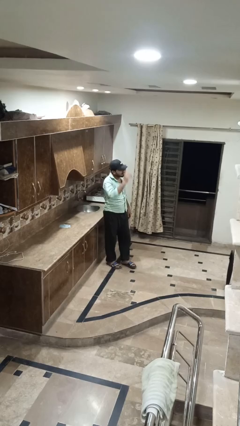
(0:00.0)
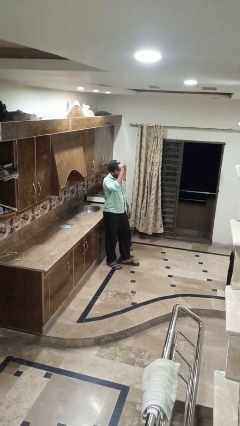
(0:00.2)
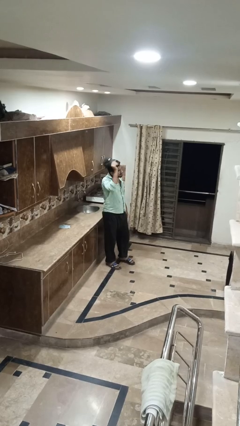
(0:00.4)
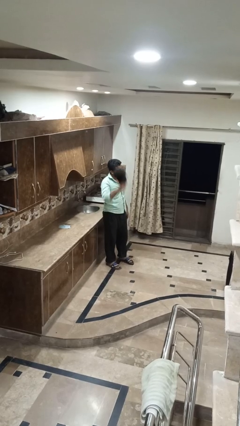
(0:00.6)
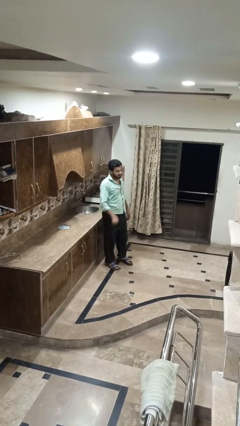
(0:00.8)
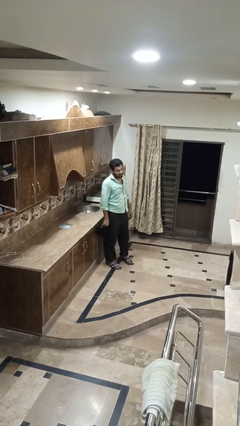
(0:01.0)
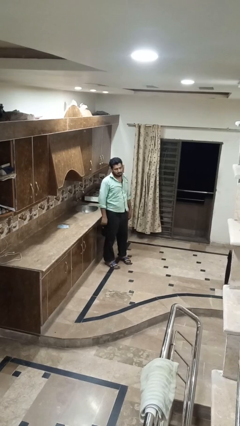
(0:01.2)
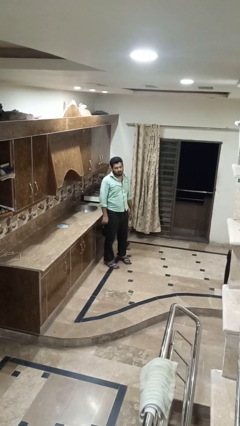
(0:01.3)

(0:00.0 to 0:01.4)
person takes off hat

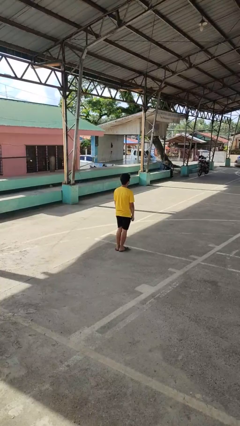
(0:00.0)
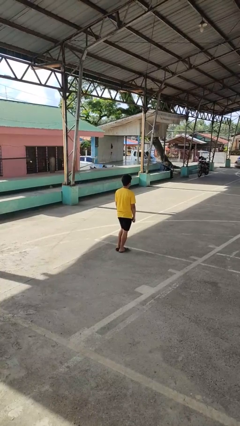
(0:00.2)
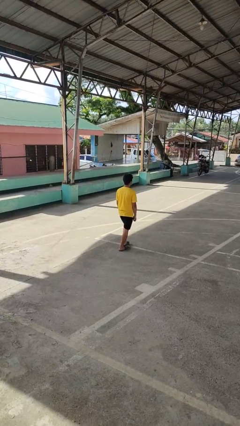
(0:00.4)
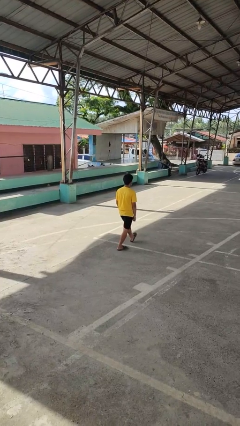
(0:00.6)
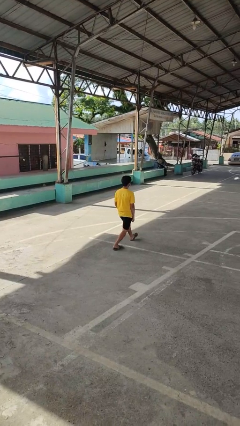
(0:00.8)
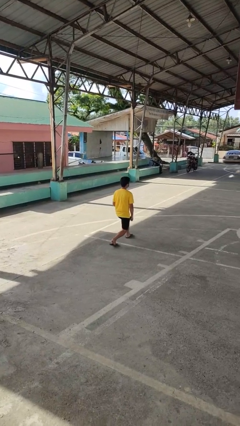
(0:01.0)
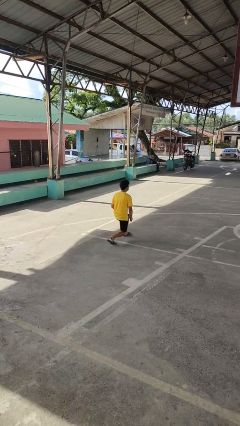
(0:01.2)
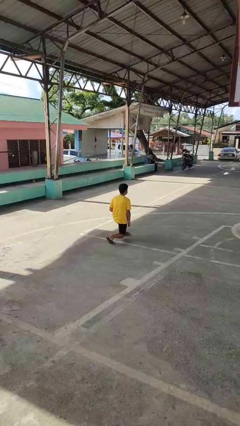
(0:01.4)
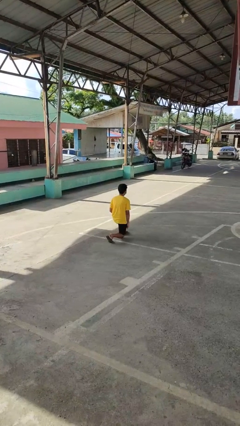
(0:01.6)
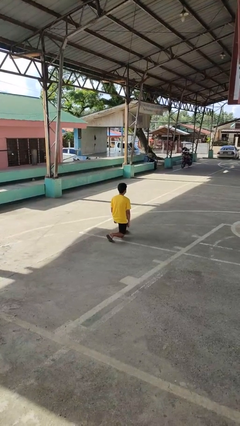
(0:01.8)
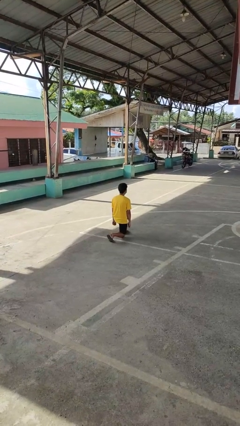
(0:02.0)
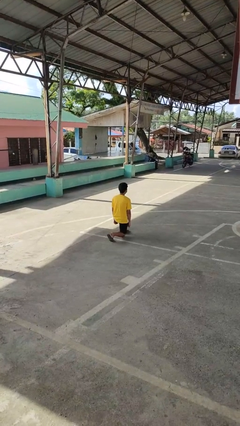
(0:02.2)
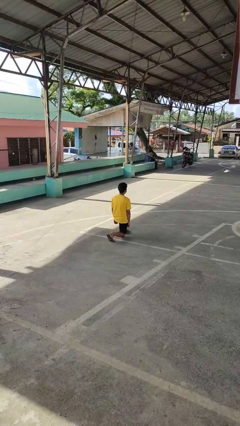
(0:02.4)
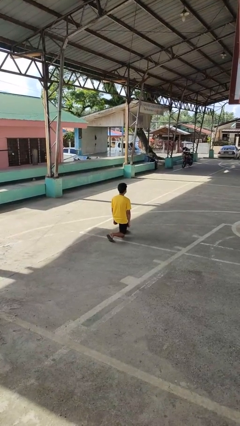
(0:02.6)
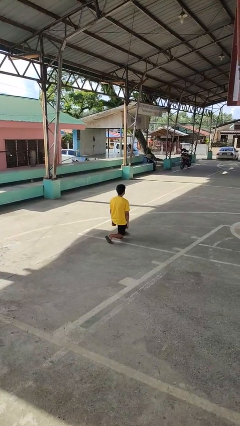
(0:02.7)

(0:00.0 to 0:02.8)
person kneels

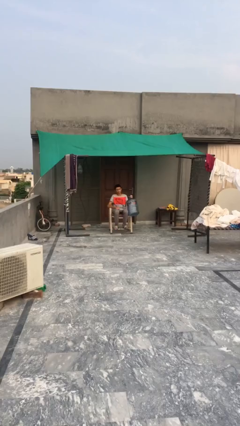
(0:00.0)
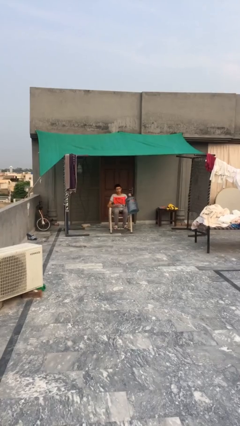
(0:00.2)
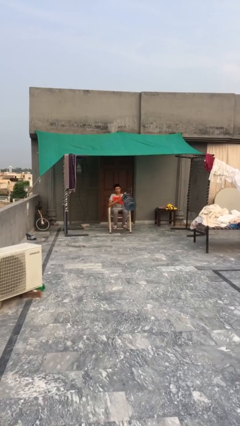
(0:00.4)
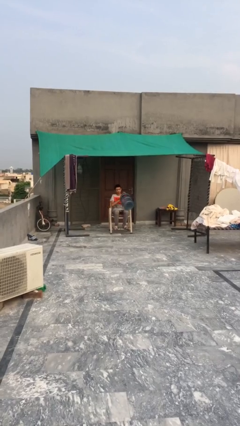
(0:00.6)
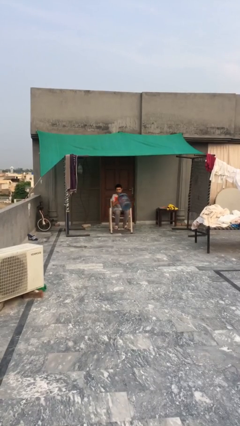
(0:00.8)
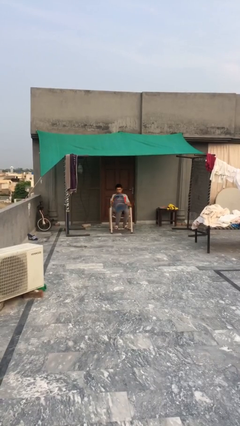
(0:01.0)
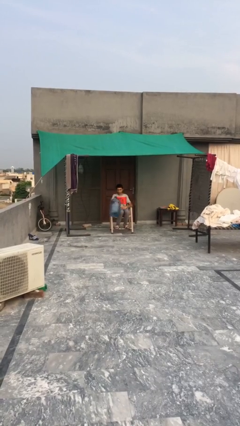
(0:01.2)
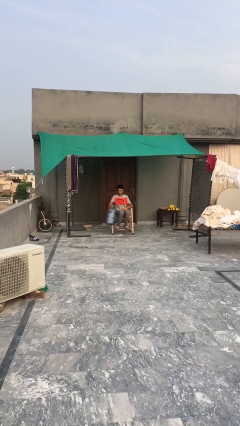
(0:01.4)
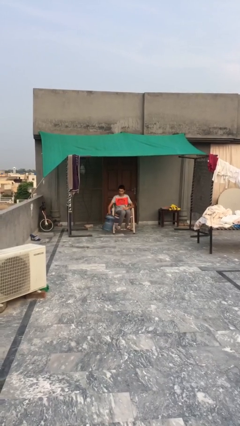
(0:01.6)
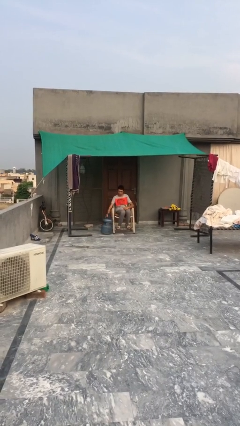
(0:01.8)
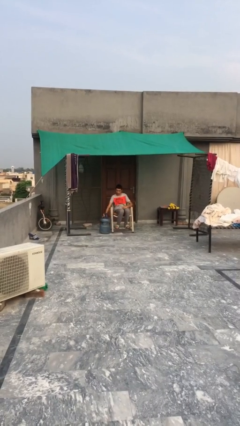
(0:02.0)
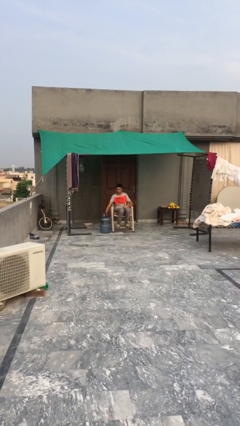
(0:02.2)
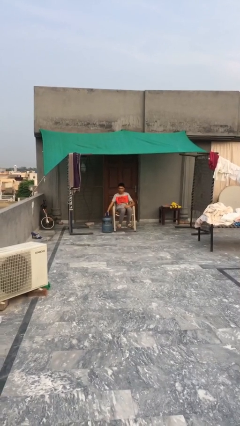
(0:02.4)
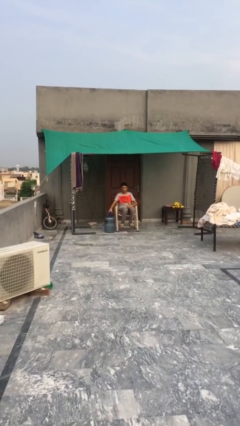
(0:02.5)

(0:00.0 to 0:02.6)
person puts down object on floor

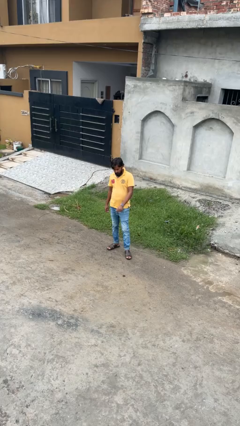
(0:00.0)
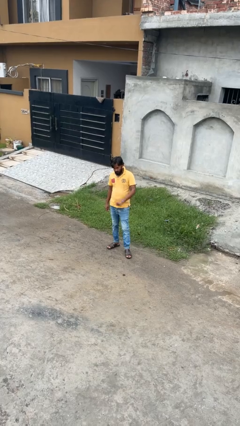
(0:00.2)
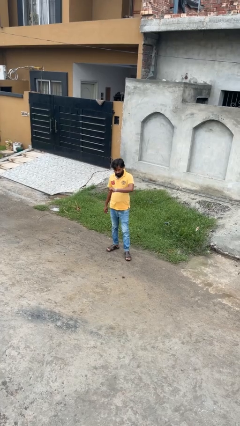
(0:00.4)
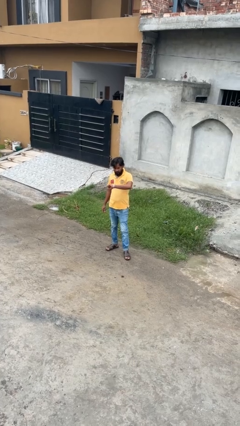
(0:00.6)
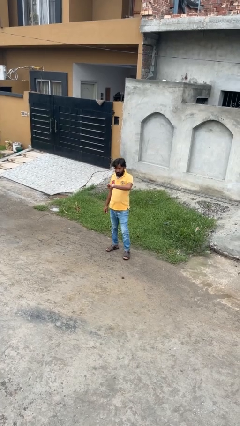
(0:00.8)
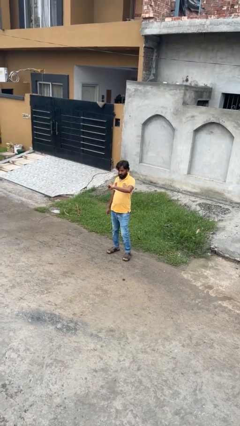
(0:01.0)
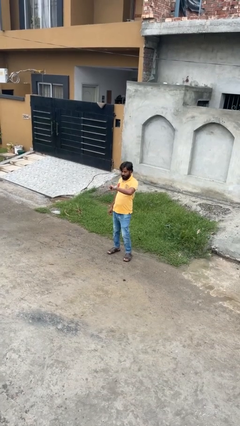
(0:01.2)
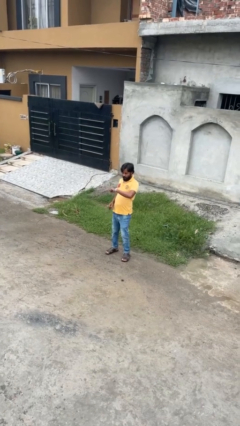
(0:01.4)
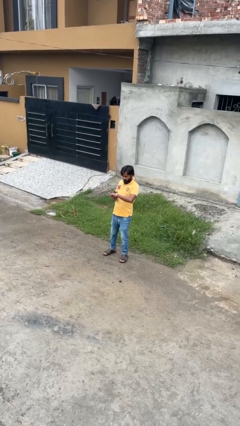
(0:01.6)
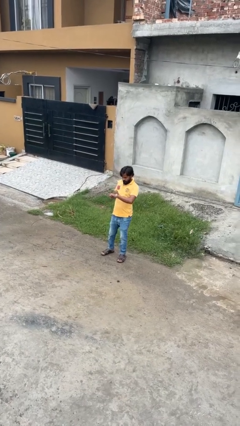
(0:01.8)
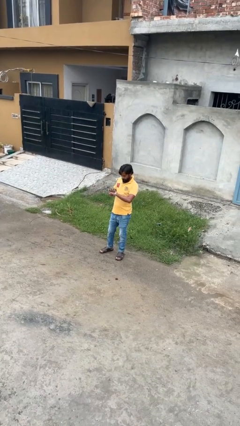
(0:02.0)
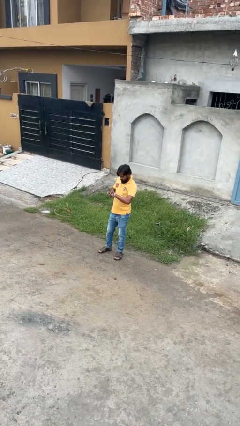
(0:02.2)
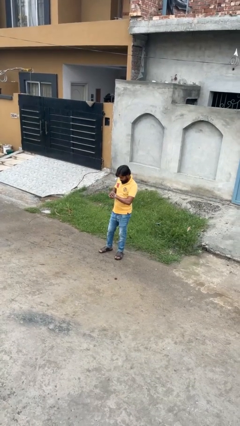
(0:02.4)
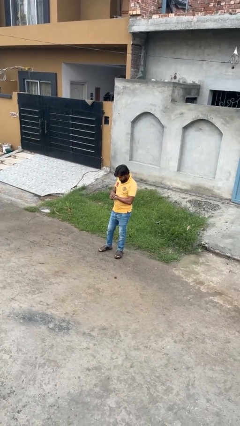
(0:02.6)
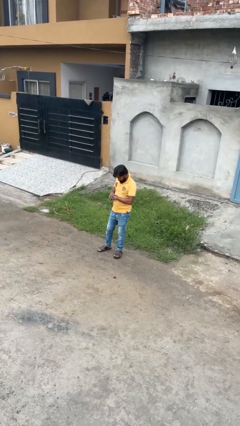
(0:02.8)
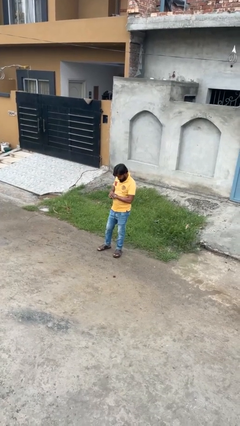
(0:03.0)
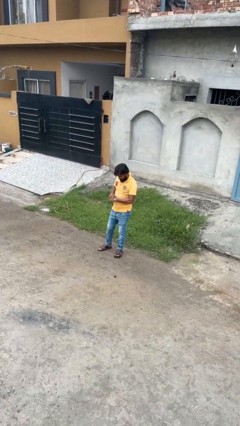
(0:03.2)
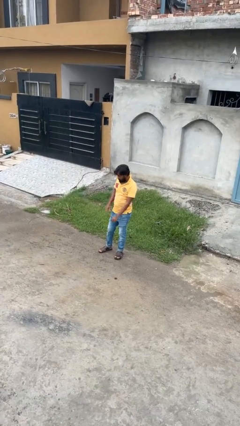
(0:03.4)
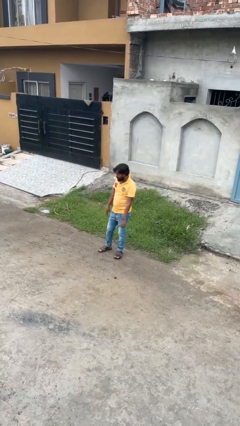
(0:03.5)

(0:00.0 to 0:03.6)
person looks at wristwatch

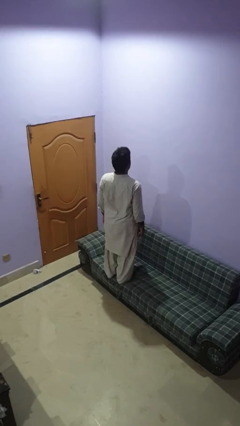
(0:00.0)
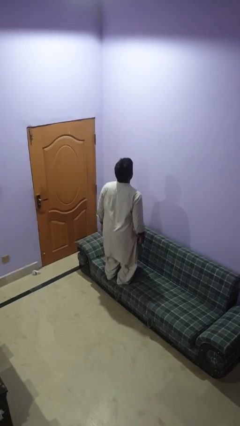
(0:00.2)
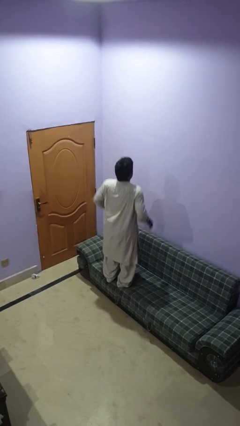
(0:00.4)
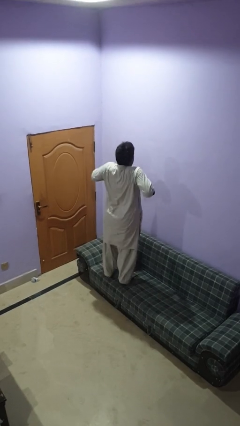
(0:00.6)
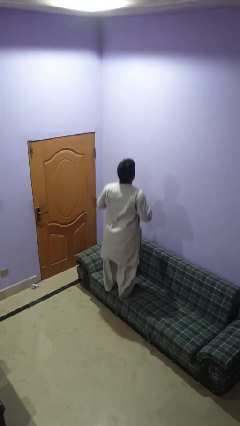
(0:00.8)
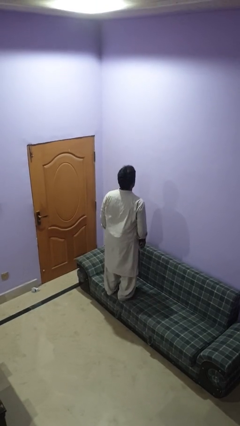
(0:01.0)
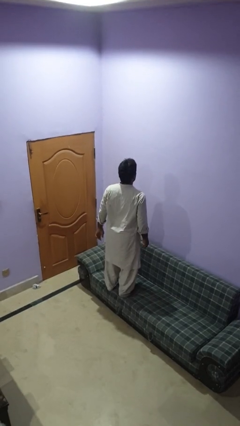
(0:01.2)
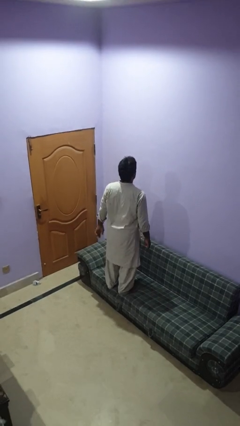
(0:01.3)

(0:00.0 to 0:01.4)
person jumps on couch

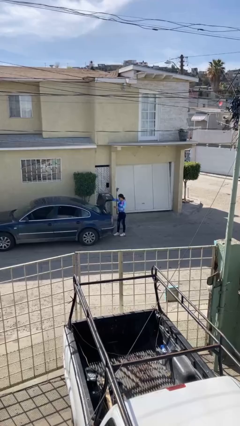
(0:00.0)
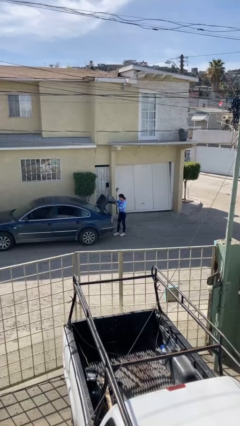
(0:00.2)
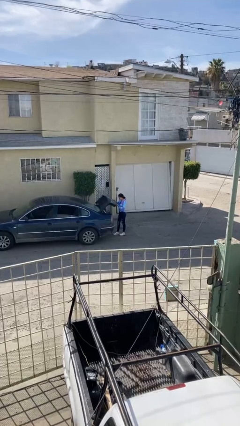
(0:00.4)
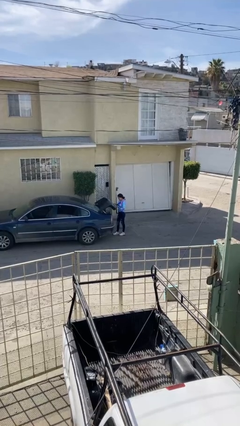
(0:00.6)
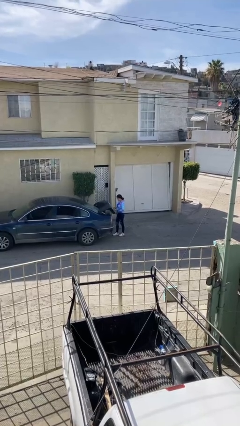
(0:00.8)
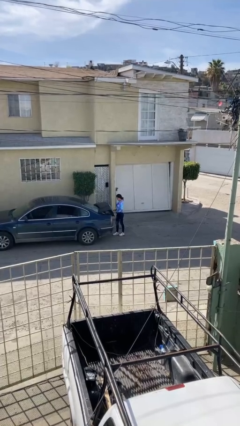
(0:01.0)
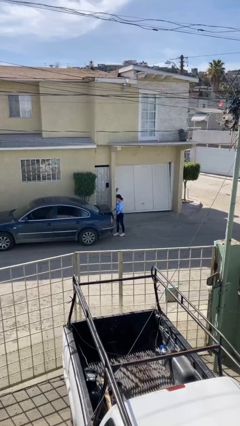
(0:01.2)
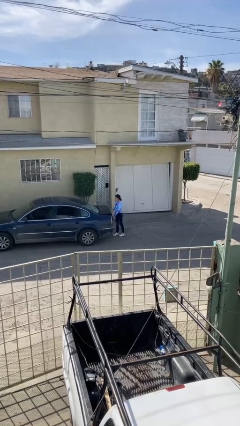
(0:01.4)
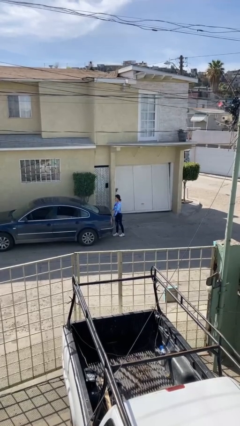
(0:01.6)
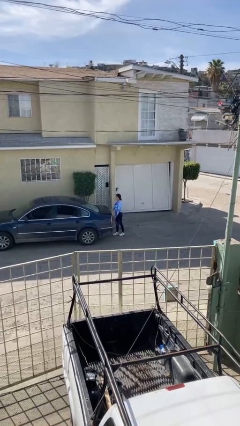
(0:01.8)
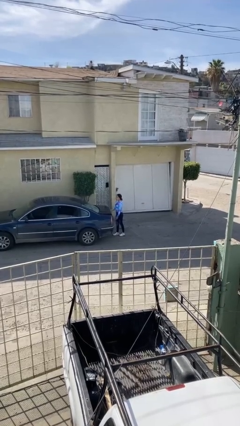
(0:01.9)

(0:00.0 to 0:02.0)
person closes car trunk

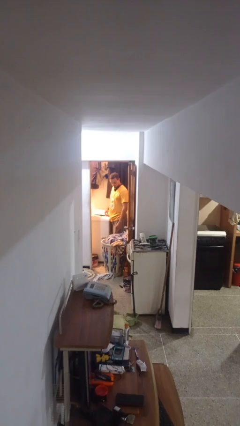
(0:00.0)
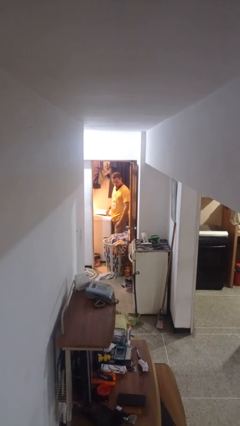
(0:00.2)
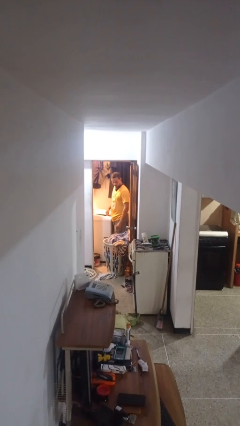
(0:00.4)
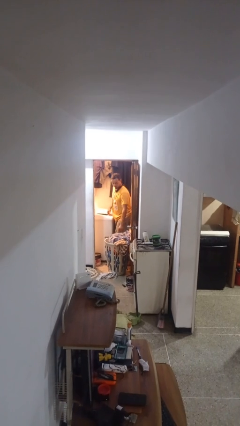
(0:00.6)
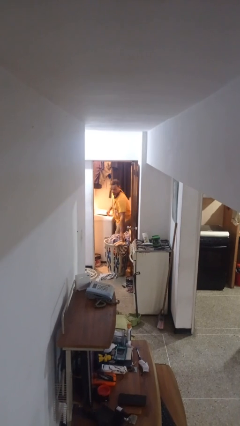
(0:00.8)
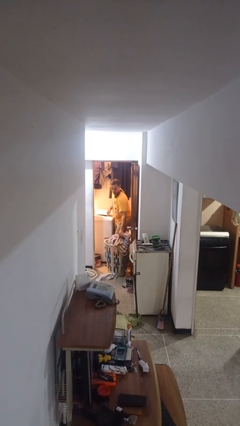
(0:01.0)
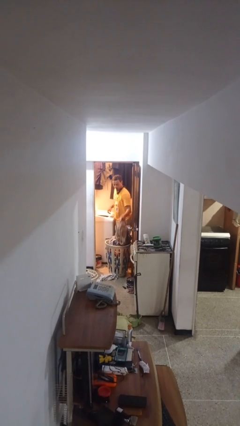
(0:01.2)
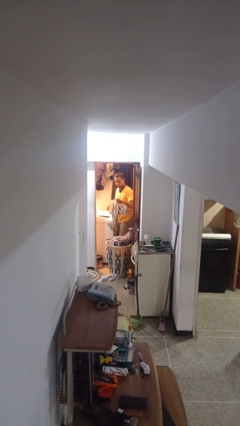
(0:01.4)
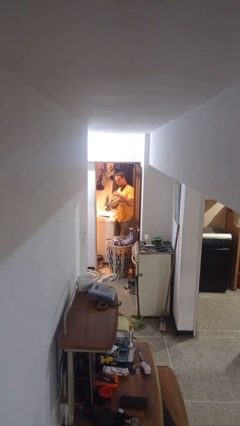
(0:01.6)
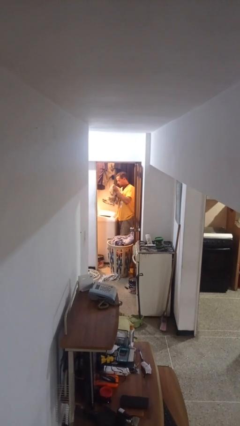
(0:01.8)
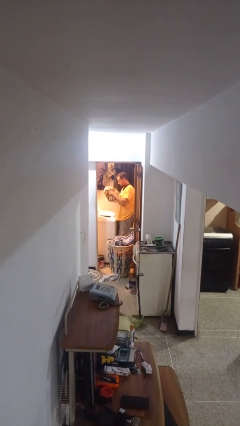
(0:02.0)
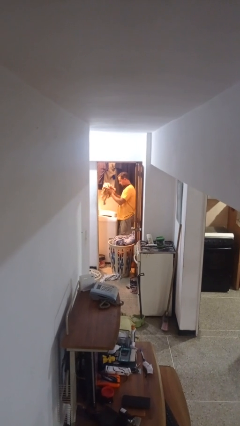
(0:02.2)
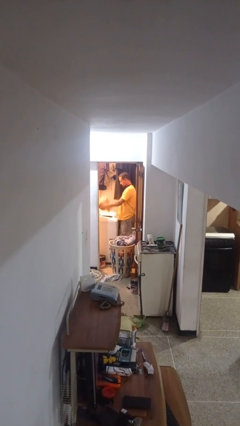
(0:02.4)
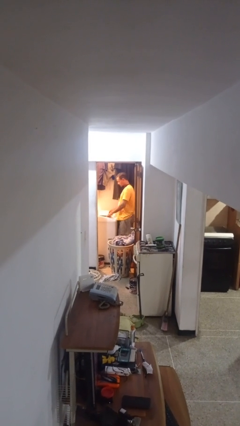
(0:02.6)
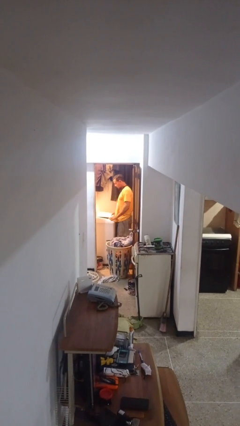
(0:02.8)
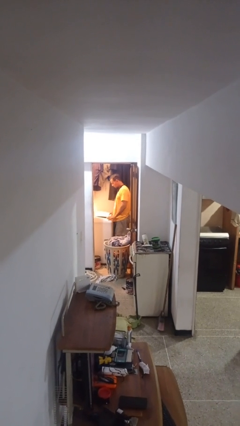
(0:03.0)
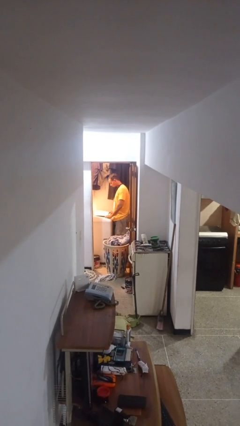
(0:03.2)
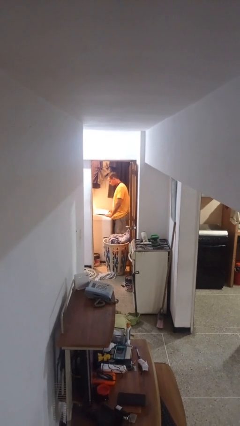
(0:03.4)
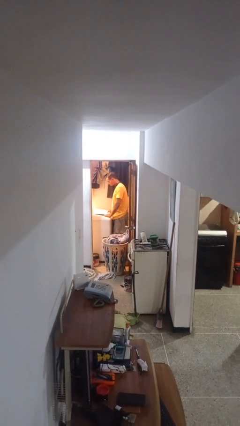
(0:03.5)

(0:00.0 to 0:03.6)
person loads clotheswasher
